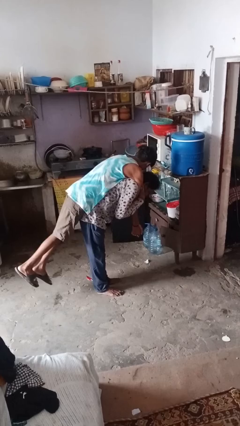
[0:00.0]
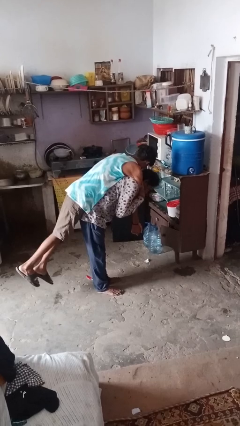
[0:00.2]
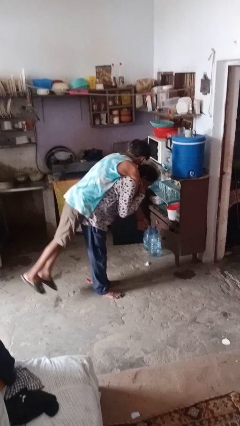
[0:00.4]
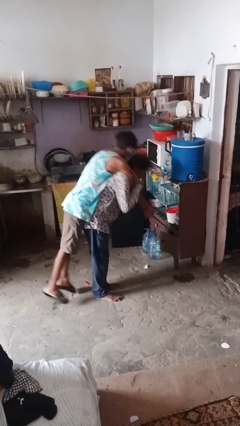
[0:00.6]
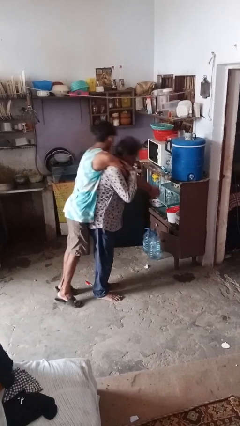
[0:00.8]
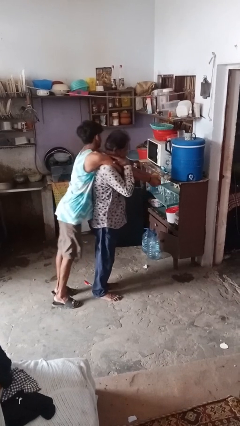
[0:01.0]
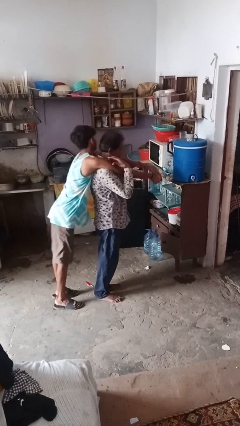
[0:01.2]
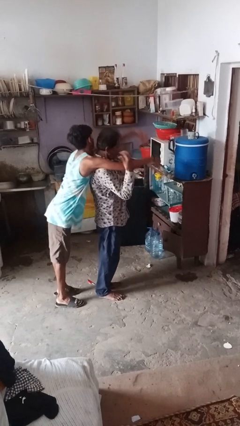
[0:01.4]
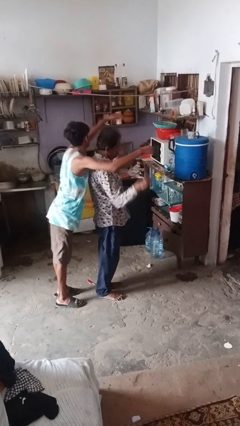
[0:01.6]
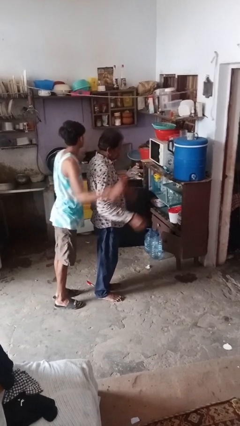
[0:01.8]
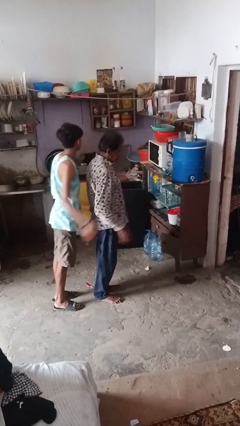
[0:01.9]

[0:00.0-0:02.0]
person puts down person

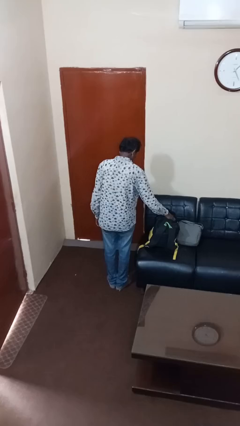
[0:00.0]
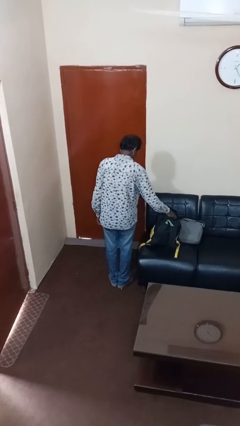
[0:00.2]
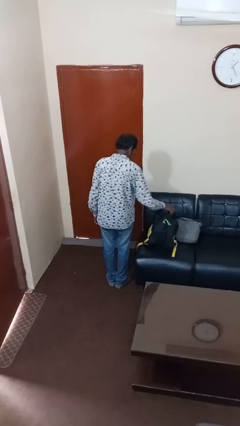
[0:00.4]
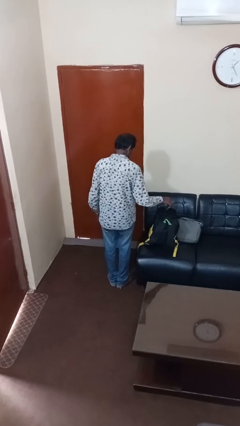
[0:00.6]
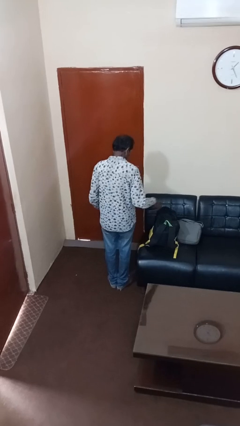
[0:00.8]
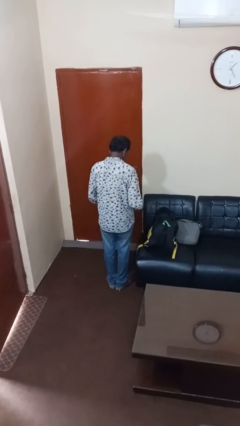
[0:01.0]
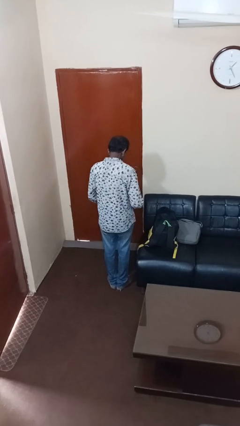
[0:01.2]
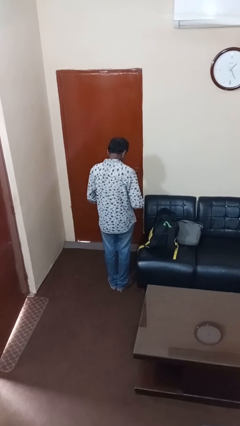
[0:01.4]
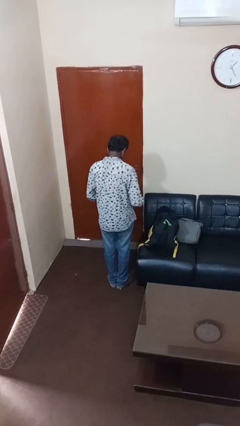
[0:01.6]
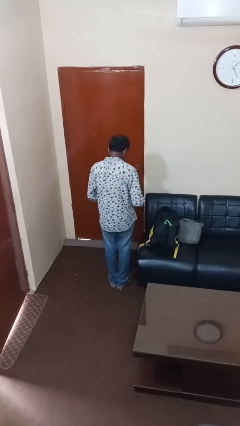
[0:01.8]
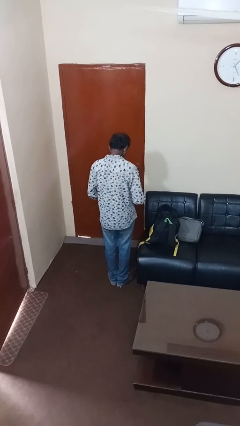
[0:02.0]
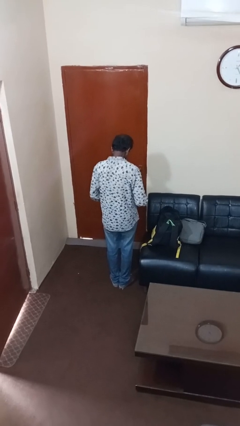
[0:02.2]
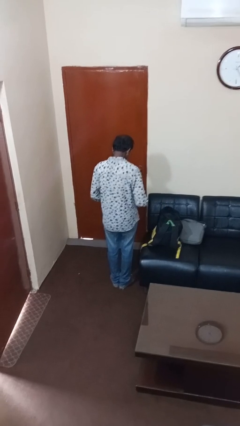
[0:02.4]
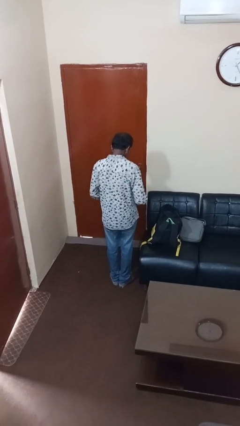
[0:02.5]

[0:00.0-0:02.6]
person takes object from backpack

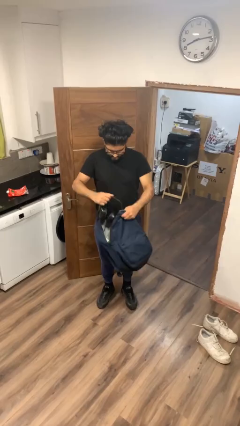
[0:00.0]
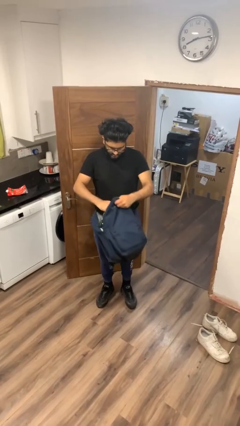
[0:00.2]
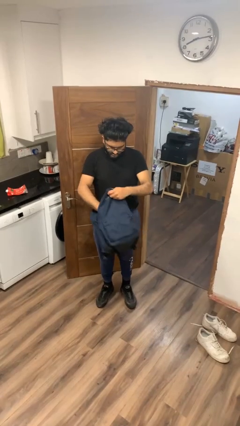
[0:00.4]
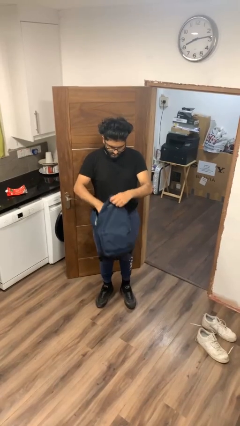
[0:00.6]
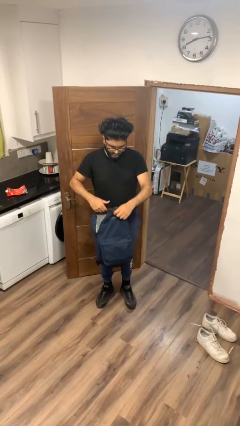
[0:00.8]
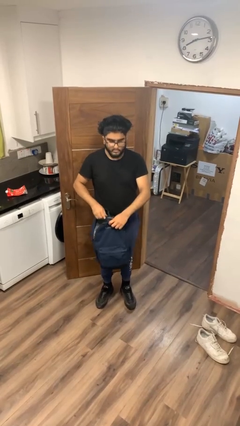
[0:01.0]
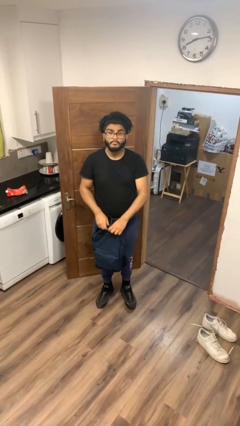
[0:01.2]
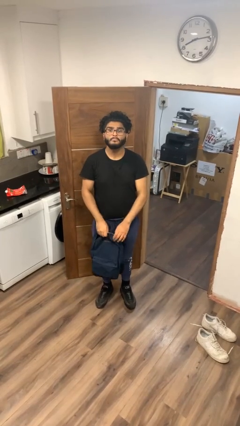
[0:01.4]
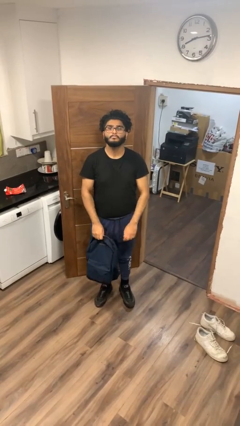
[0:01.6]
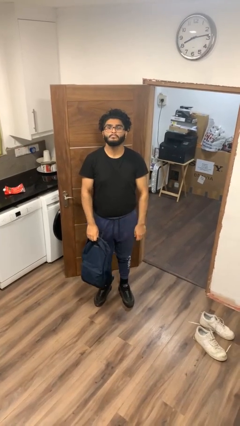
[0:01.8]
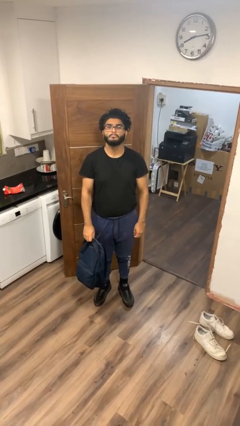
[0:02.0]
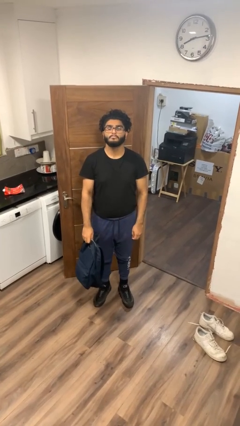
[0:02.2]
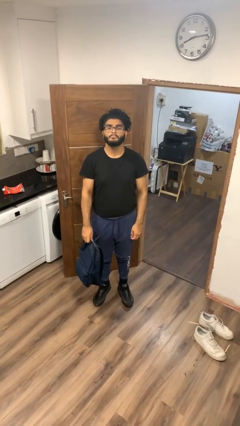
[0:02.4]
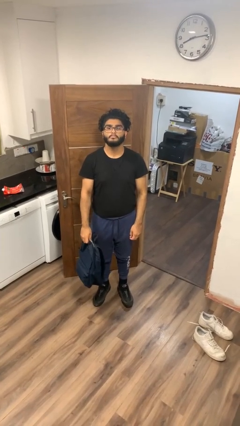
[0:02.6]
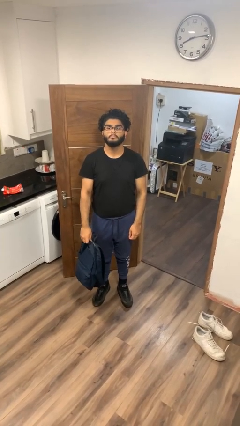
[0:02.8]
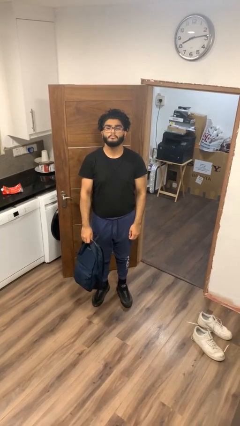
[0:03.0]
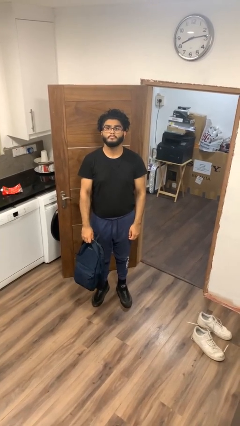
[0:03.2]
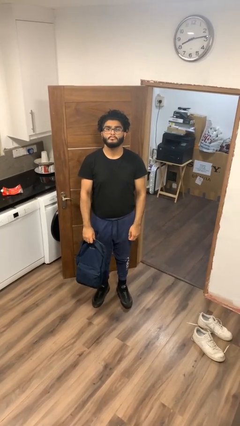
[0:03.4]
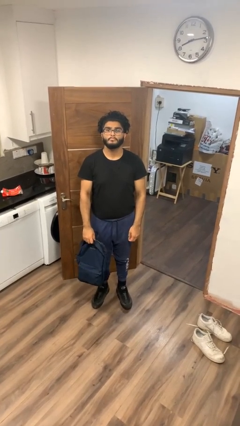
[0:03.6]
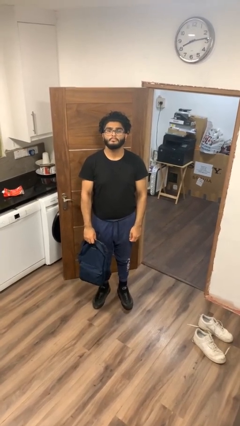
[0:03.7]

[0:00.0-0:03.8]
person puts object into backpack

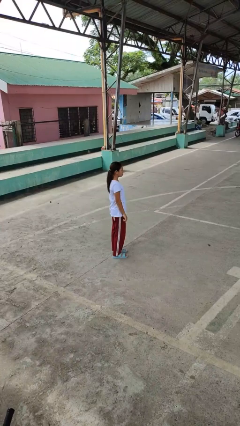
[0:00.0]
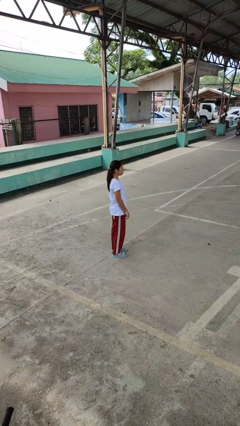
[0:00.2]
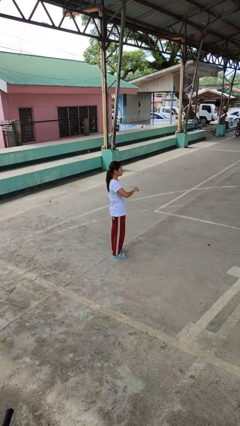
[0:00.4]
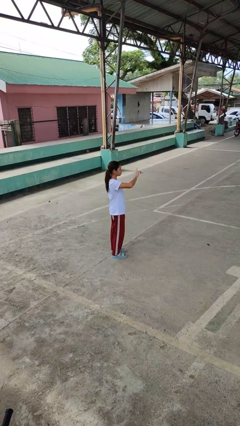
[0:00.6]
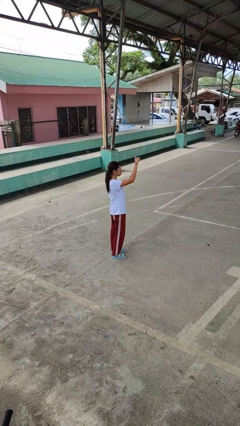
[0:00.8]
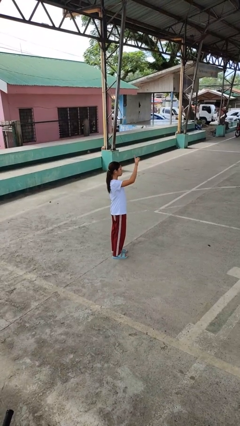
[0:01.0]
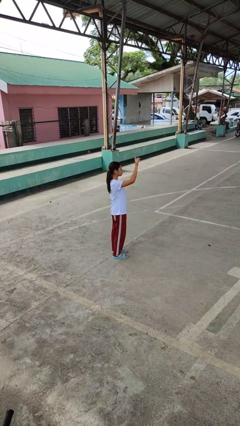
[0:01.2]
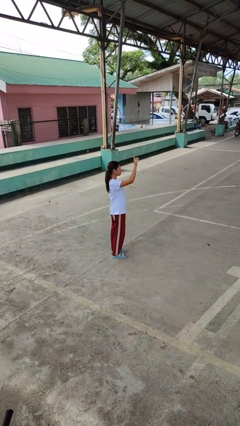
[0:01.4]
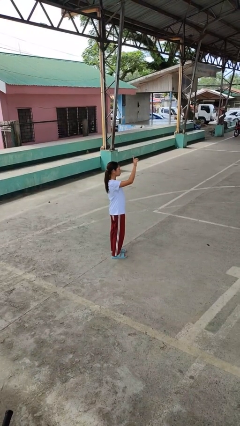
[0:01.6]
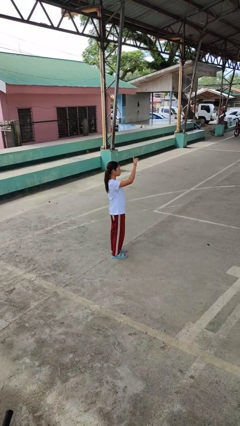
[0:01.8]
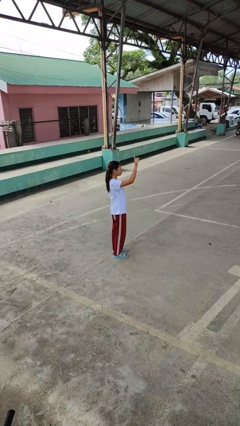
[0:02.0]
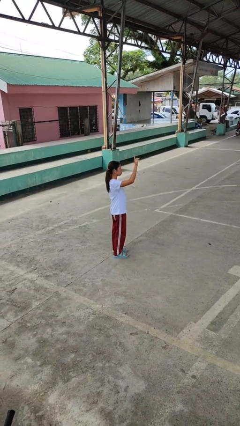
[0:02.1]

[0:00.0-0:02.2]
person gestures swipe up

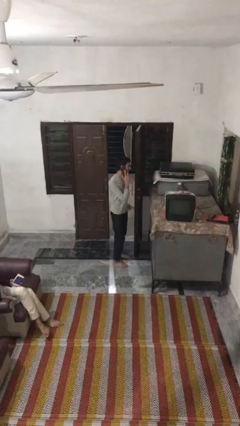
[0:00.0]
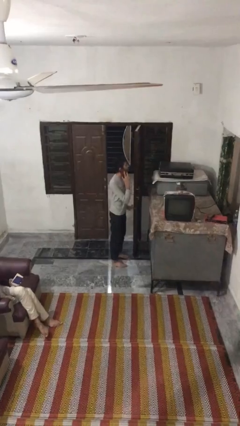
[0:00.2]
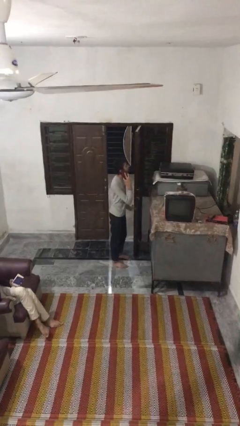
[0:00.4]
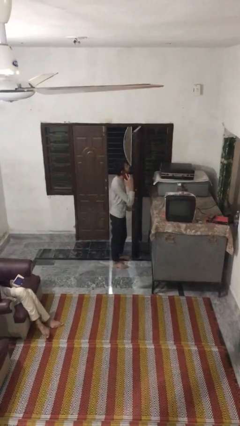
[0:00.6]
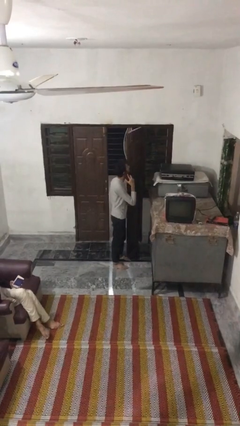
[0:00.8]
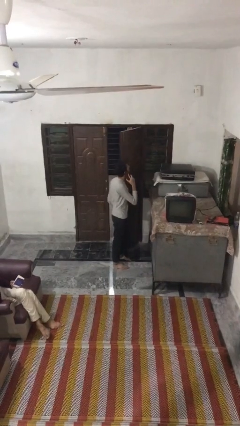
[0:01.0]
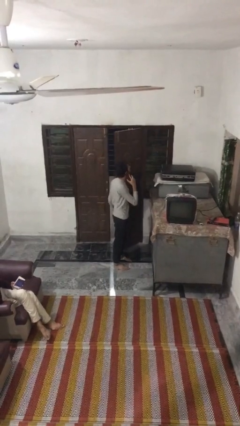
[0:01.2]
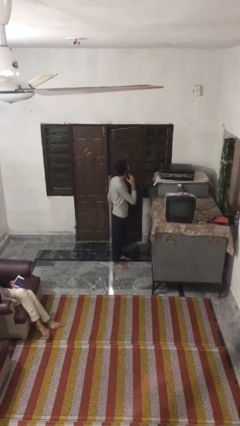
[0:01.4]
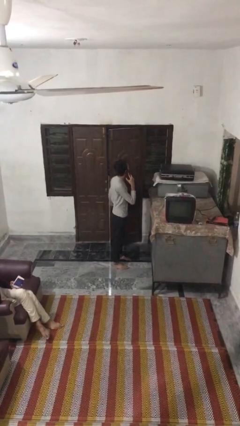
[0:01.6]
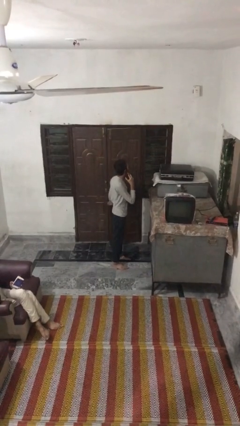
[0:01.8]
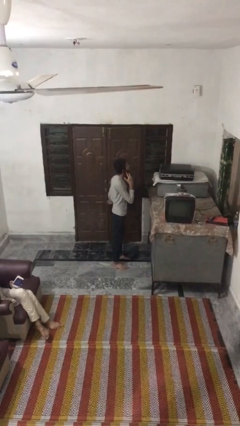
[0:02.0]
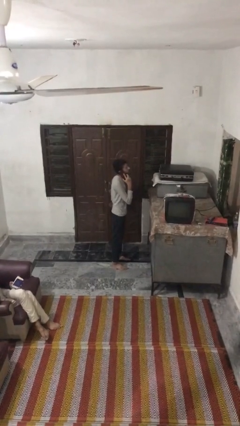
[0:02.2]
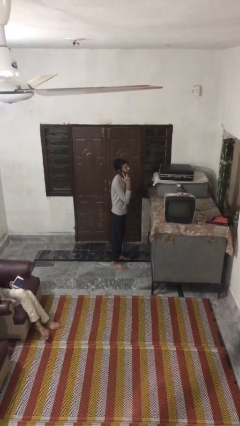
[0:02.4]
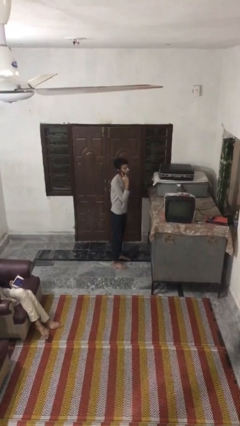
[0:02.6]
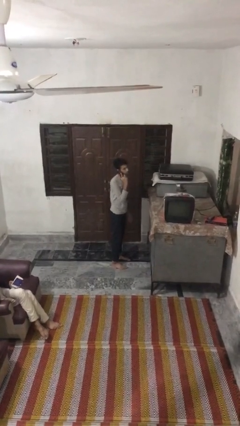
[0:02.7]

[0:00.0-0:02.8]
person closes facility door

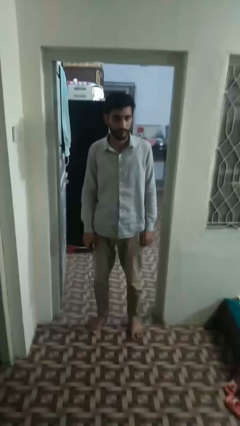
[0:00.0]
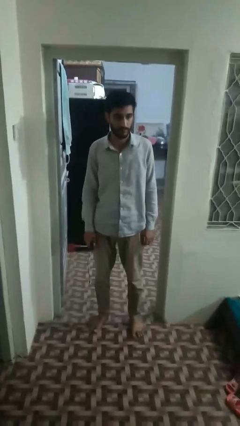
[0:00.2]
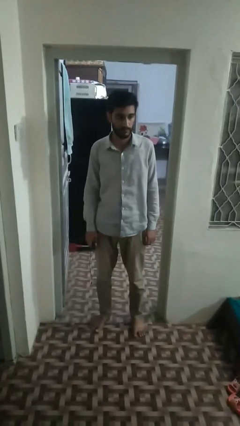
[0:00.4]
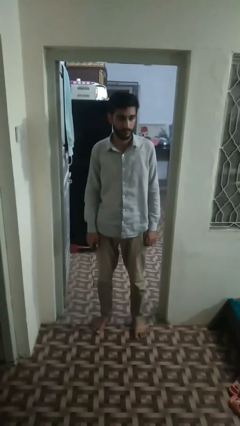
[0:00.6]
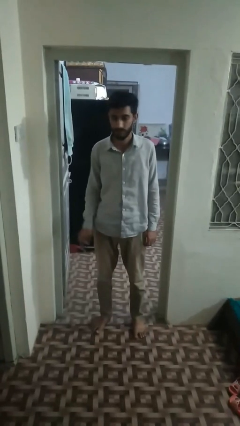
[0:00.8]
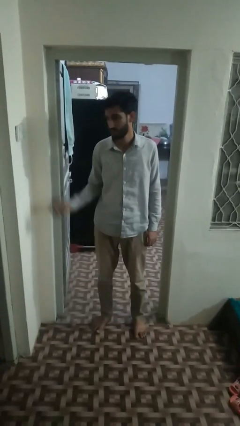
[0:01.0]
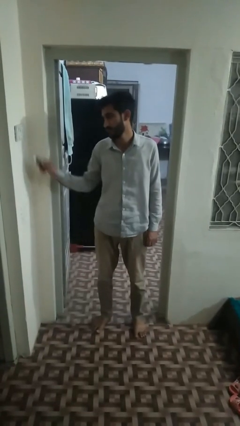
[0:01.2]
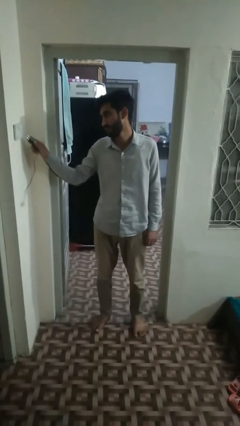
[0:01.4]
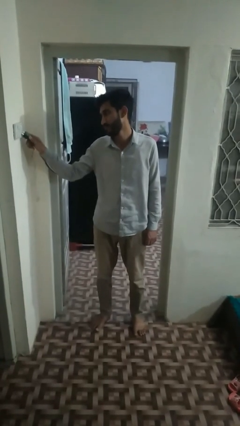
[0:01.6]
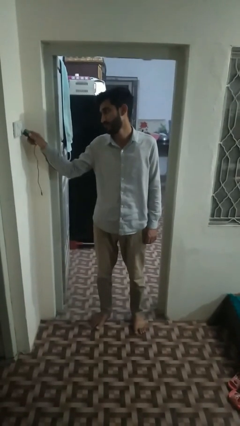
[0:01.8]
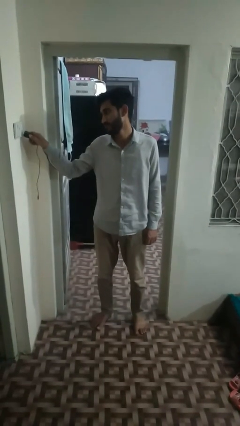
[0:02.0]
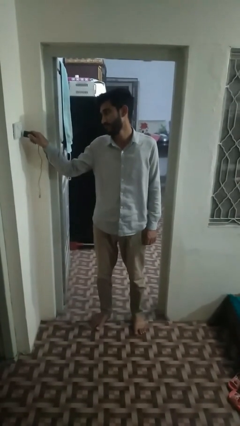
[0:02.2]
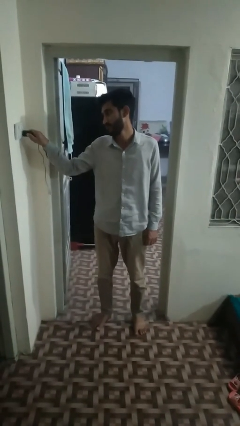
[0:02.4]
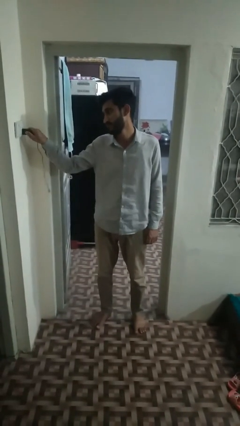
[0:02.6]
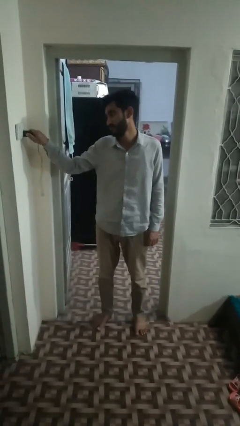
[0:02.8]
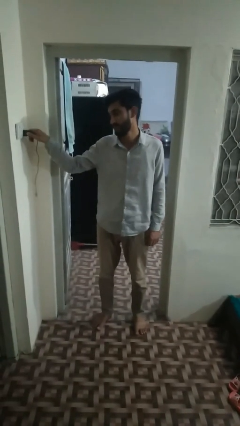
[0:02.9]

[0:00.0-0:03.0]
person plugs into electrical socket

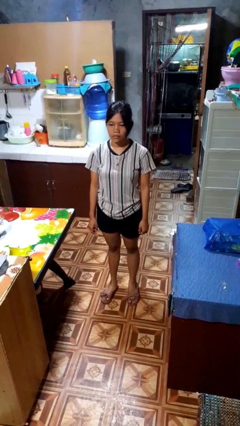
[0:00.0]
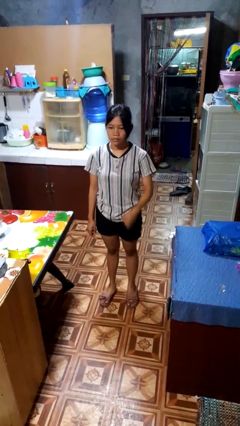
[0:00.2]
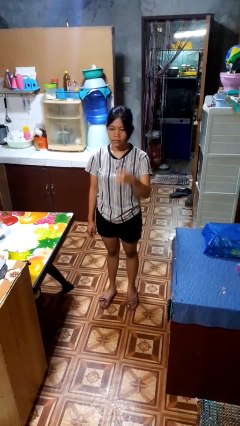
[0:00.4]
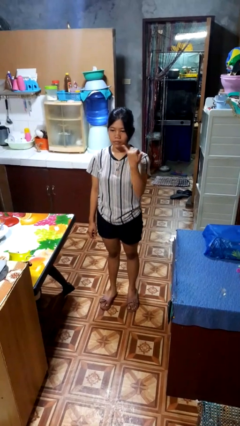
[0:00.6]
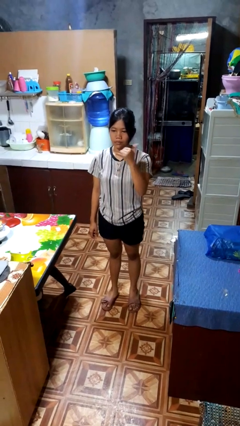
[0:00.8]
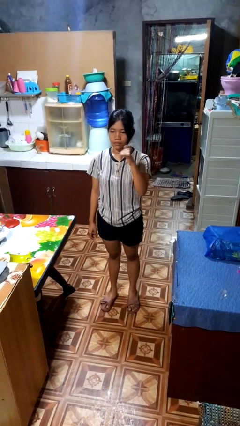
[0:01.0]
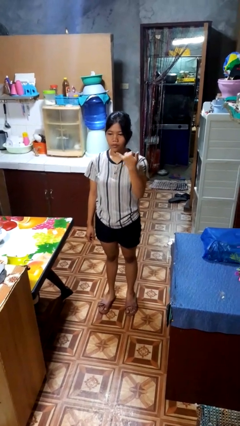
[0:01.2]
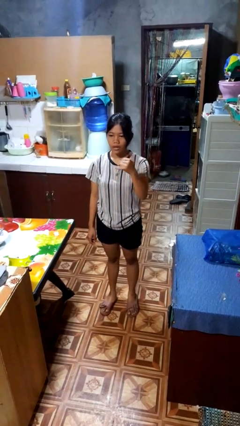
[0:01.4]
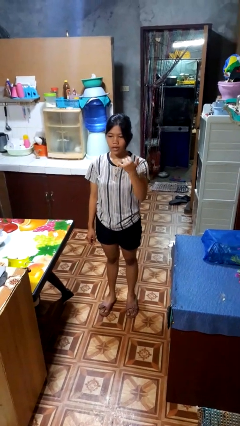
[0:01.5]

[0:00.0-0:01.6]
person gestures hang loose
